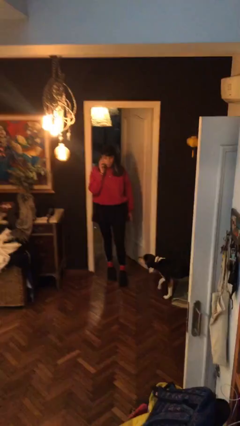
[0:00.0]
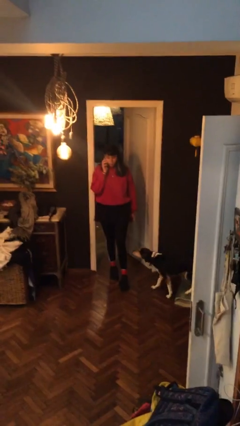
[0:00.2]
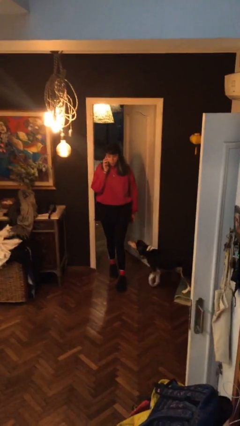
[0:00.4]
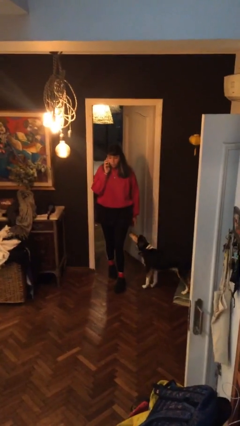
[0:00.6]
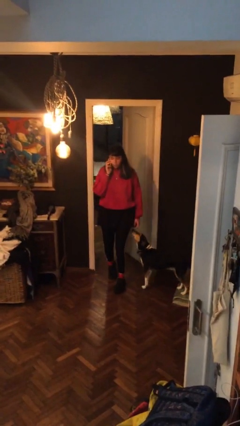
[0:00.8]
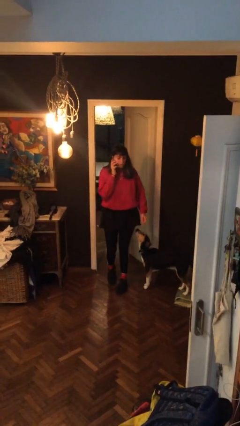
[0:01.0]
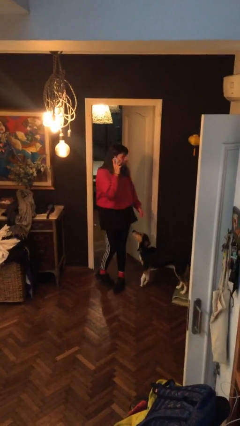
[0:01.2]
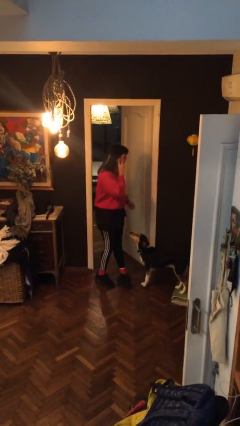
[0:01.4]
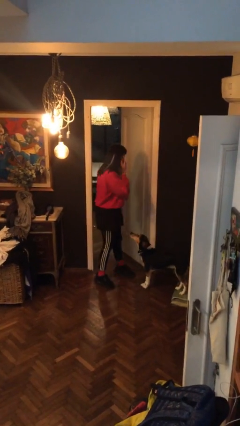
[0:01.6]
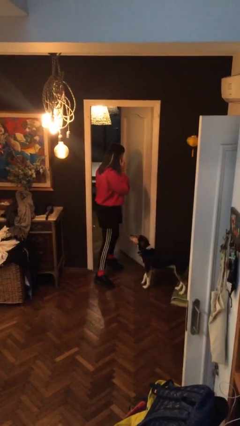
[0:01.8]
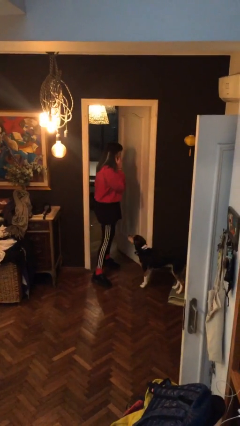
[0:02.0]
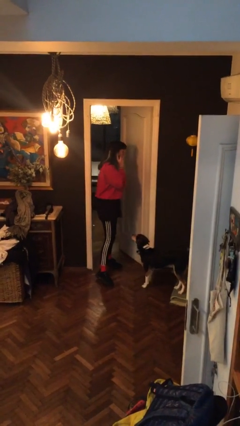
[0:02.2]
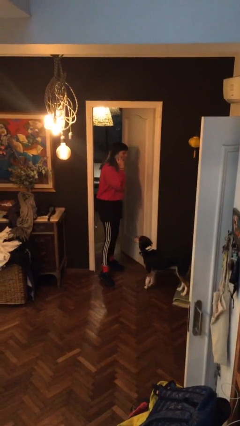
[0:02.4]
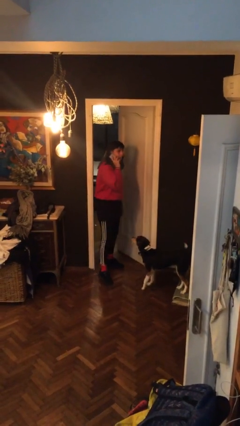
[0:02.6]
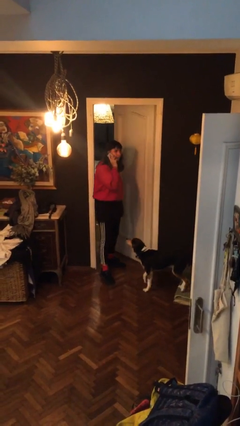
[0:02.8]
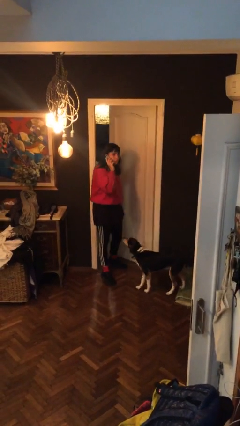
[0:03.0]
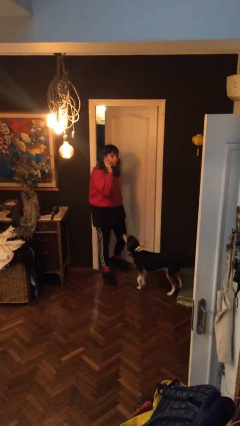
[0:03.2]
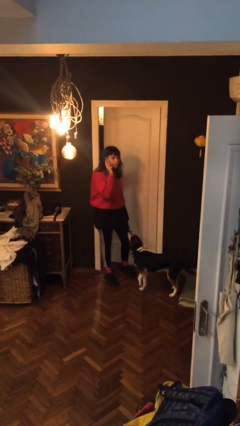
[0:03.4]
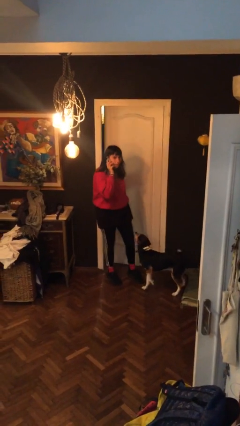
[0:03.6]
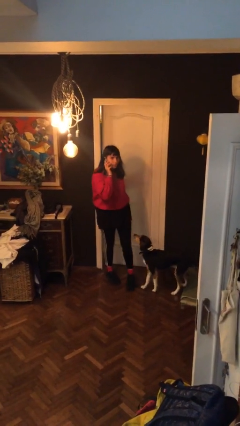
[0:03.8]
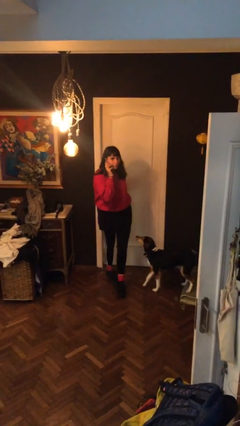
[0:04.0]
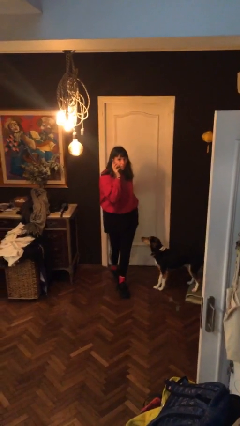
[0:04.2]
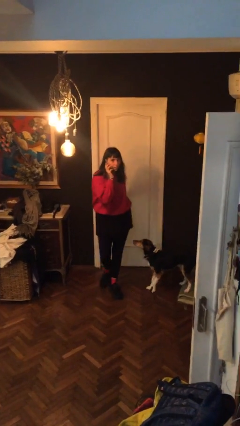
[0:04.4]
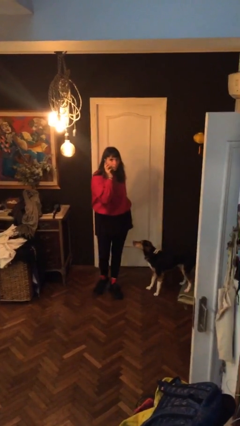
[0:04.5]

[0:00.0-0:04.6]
person closes facility door

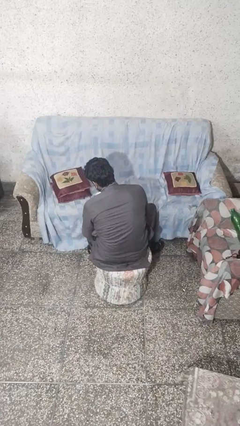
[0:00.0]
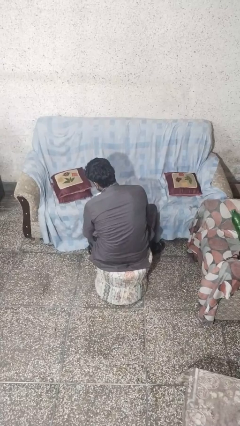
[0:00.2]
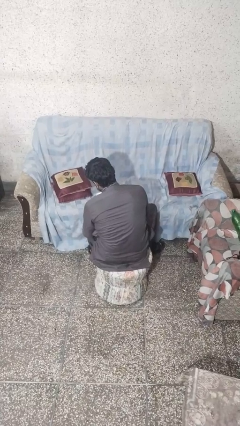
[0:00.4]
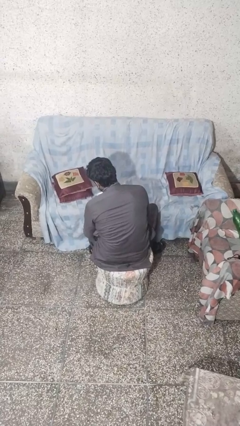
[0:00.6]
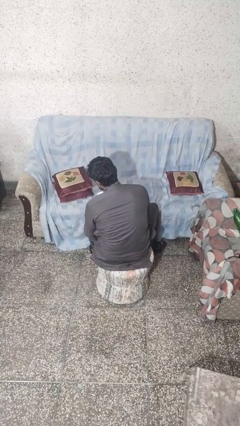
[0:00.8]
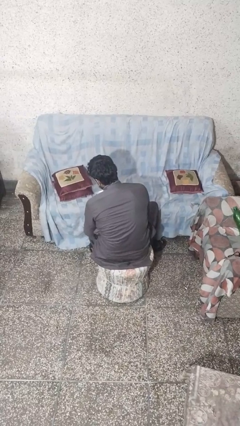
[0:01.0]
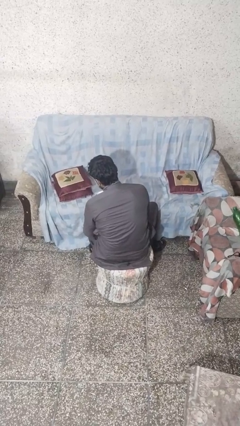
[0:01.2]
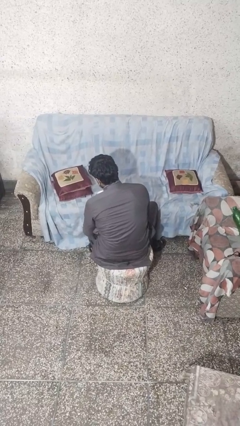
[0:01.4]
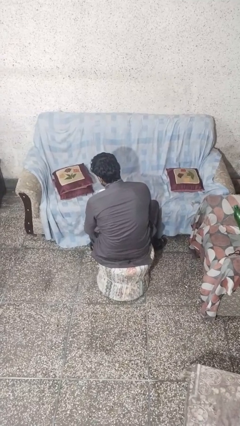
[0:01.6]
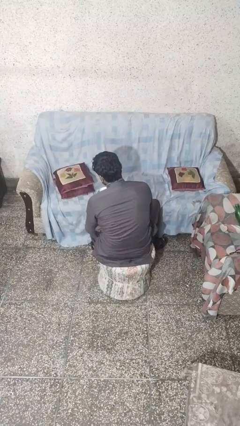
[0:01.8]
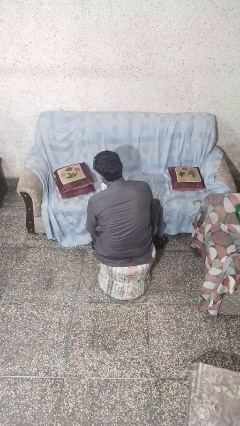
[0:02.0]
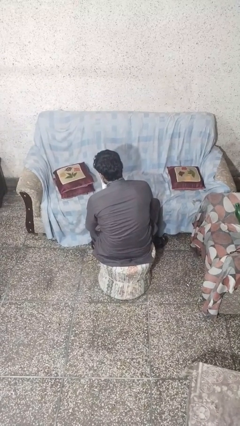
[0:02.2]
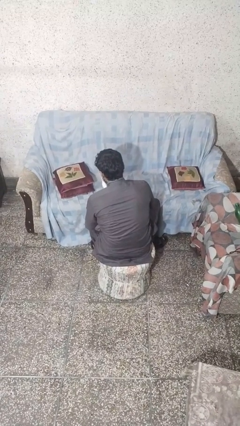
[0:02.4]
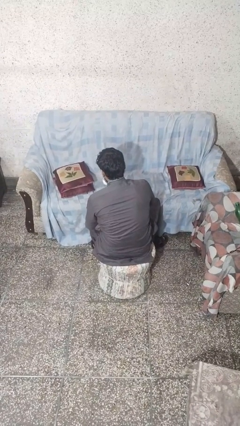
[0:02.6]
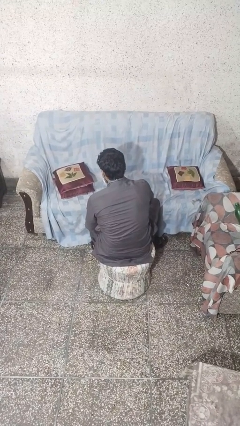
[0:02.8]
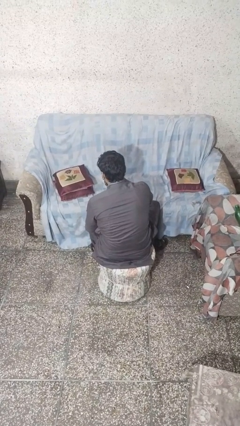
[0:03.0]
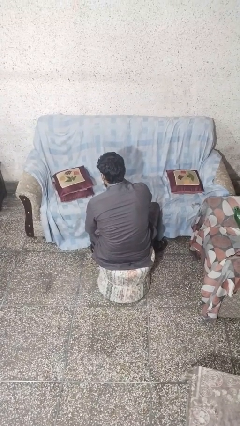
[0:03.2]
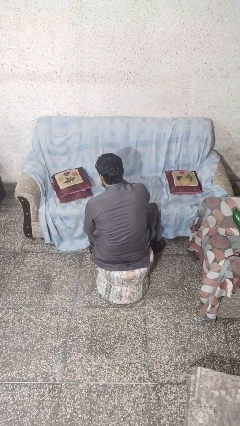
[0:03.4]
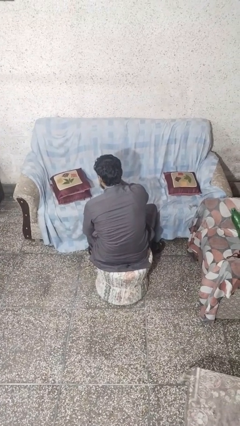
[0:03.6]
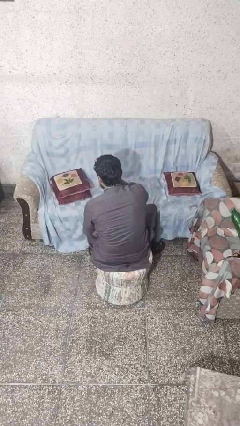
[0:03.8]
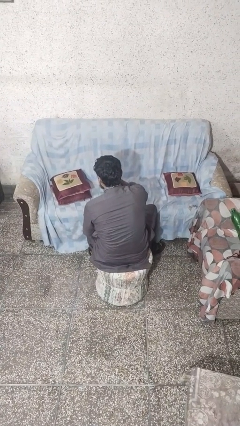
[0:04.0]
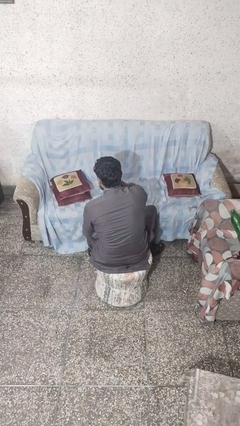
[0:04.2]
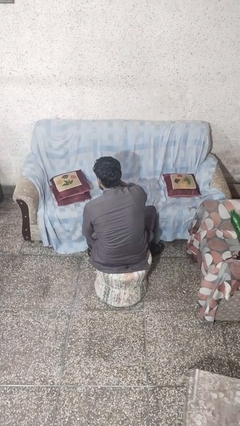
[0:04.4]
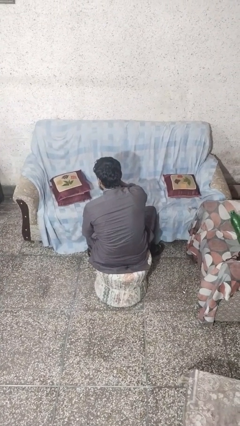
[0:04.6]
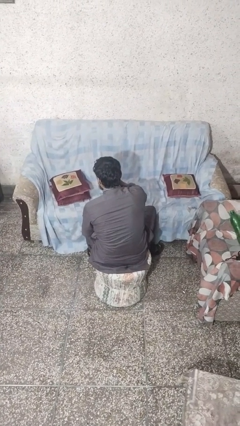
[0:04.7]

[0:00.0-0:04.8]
person drinks from mug

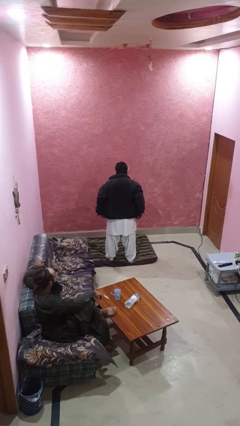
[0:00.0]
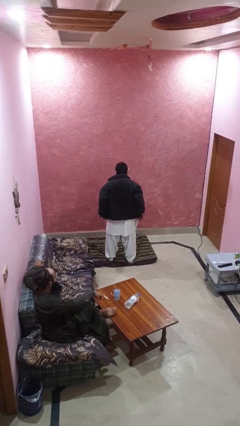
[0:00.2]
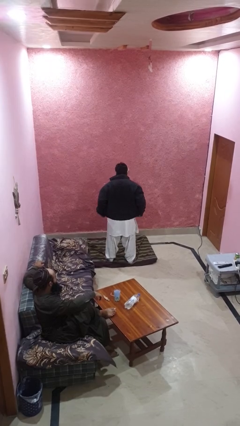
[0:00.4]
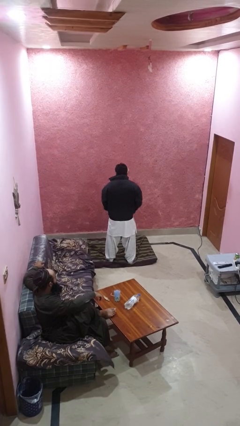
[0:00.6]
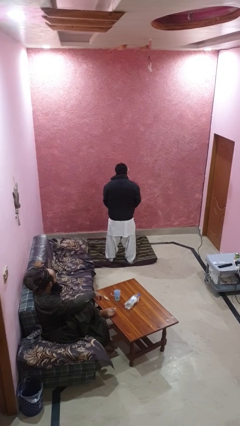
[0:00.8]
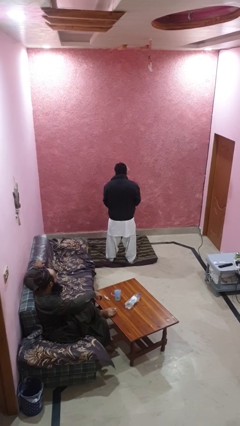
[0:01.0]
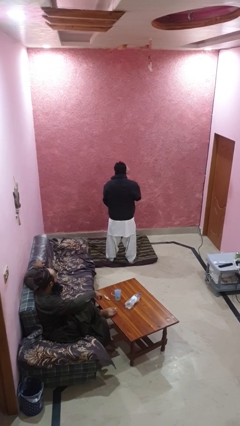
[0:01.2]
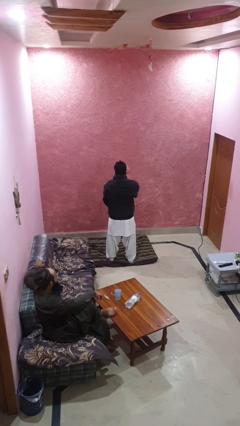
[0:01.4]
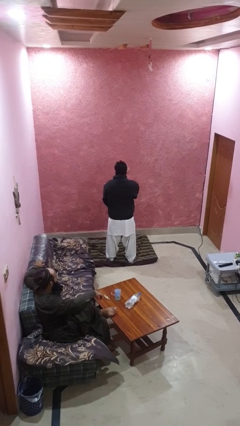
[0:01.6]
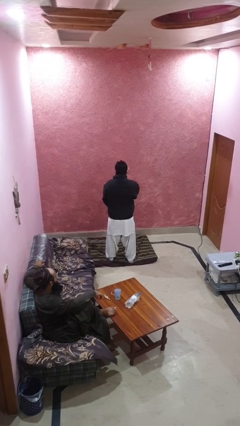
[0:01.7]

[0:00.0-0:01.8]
person zips up jacket

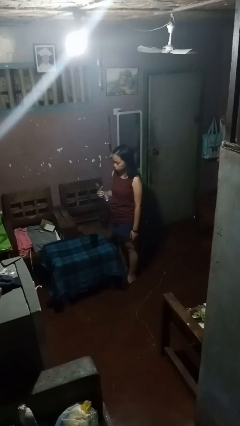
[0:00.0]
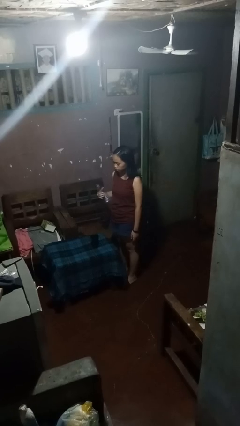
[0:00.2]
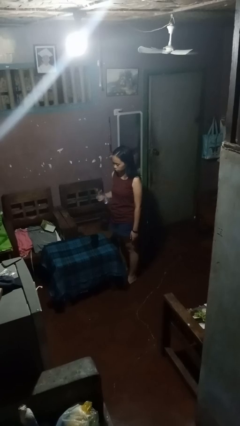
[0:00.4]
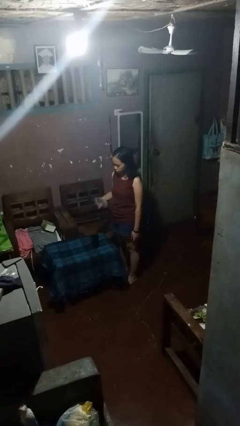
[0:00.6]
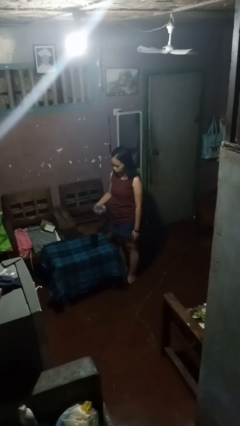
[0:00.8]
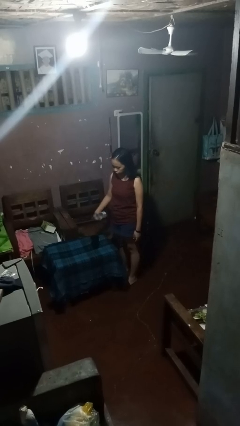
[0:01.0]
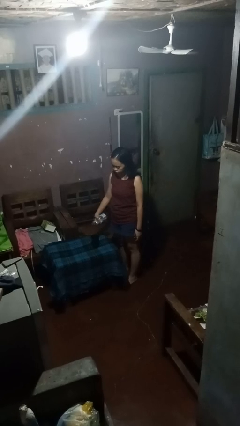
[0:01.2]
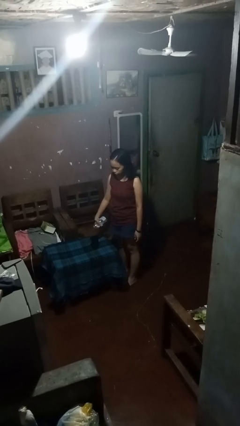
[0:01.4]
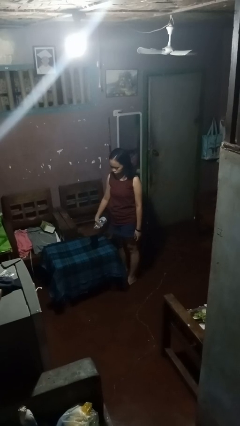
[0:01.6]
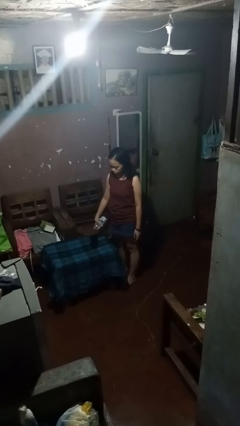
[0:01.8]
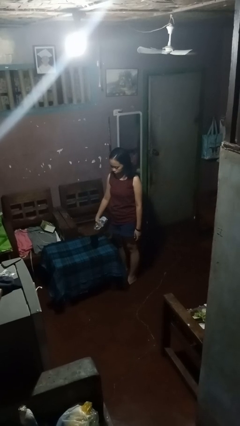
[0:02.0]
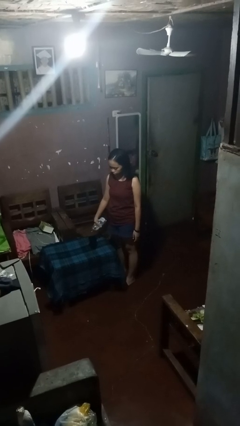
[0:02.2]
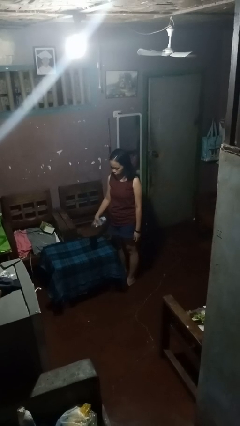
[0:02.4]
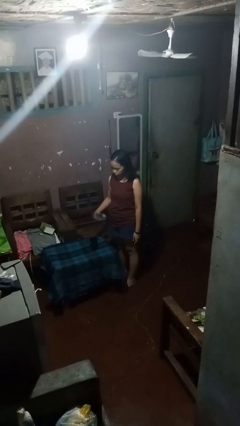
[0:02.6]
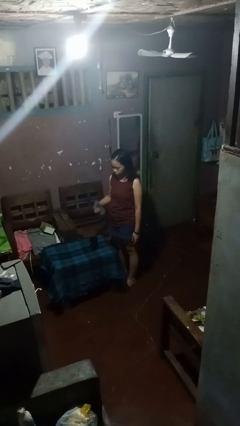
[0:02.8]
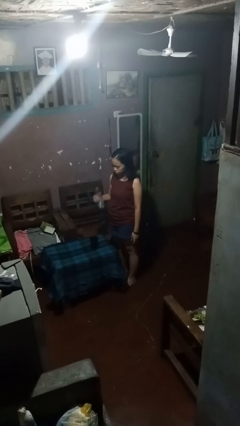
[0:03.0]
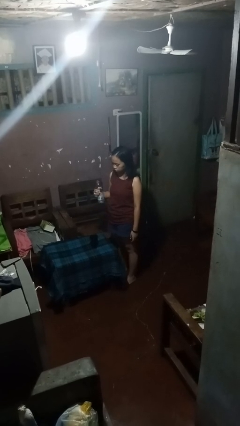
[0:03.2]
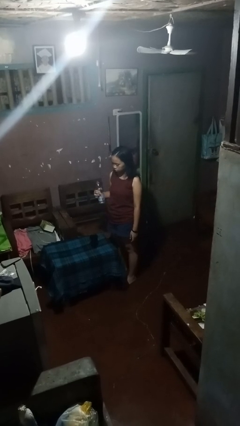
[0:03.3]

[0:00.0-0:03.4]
person pours liquid into cup

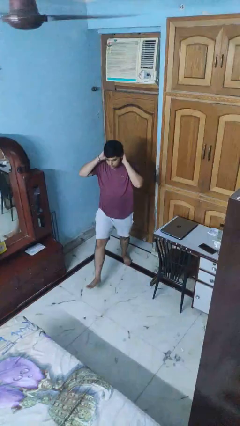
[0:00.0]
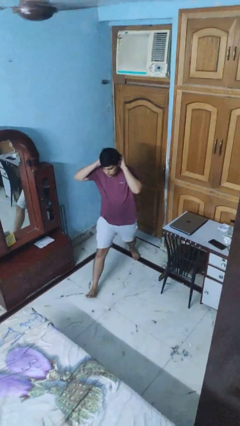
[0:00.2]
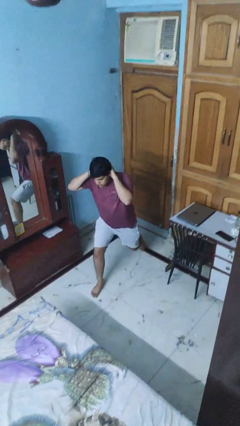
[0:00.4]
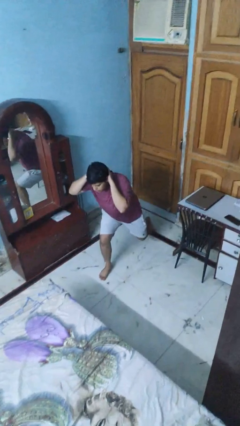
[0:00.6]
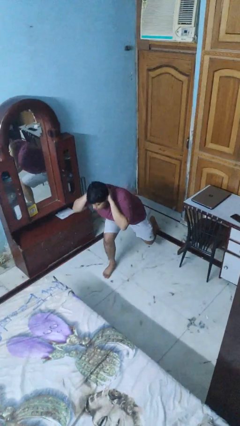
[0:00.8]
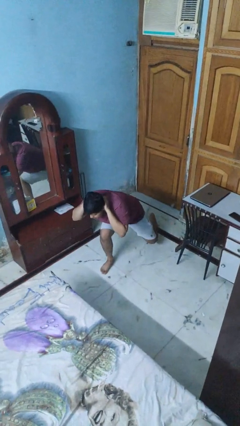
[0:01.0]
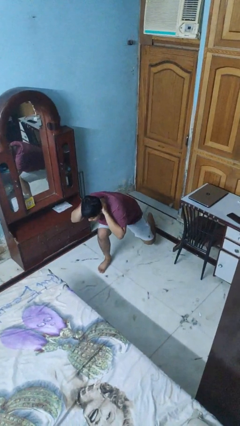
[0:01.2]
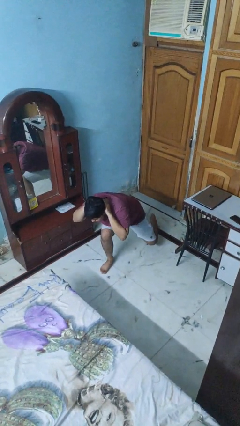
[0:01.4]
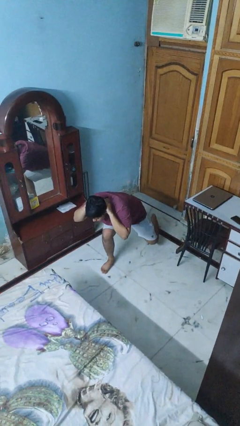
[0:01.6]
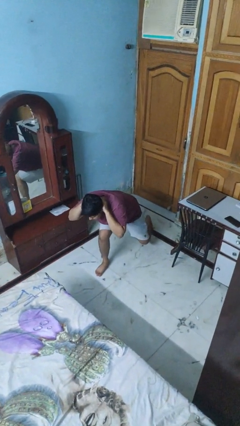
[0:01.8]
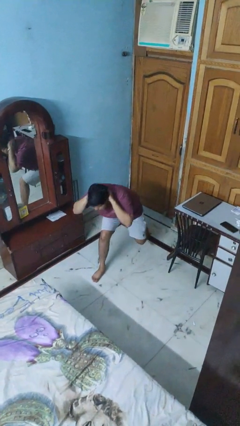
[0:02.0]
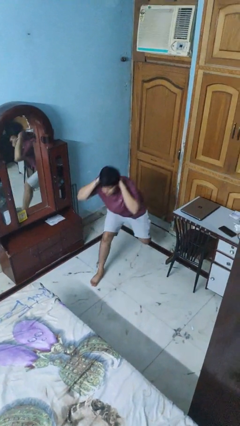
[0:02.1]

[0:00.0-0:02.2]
person exercises with lunges

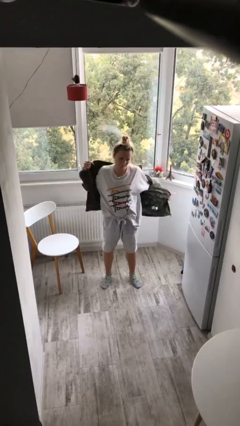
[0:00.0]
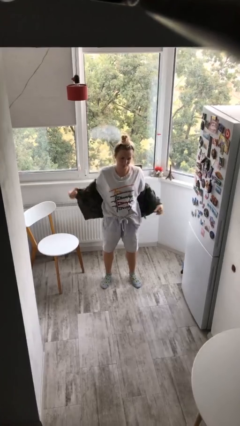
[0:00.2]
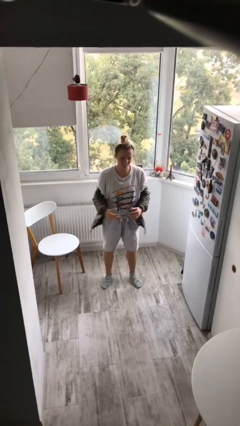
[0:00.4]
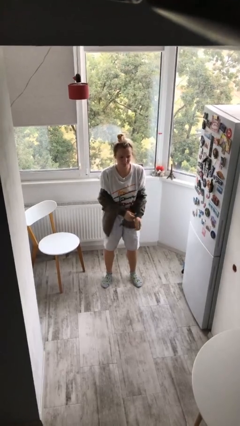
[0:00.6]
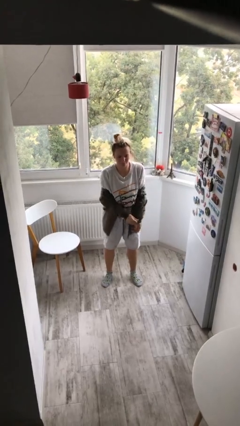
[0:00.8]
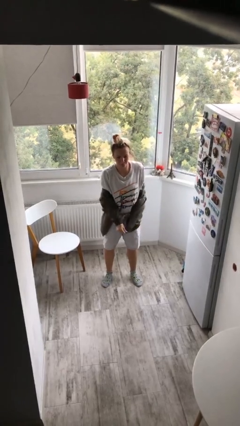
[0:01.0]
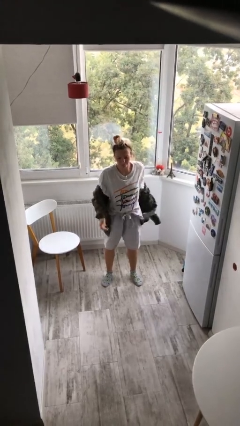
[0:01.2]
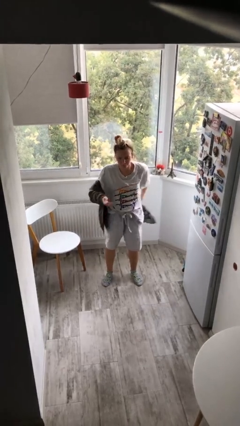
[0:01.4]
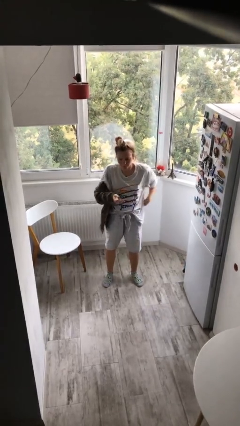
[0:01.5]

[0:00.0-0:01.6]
person takes off jacket
